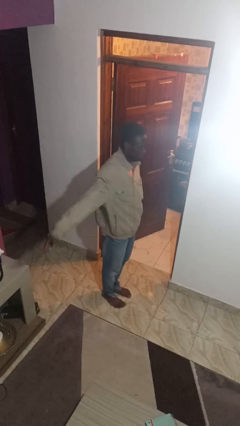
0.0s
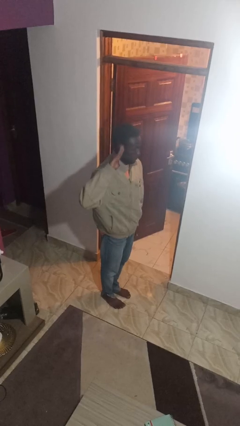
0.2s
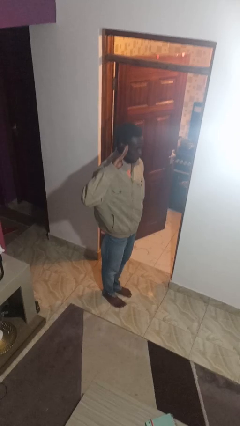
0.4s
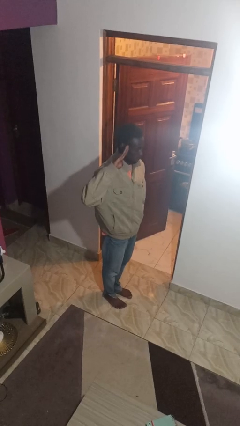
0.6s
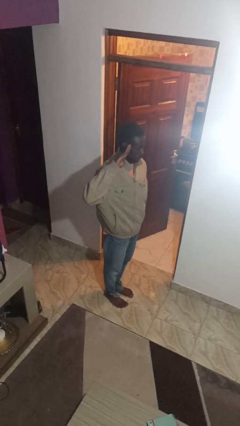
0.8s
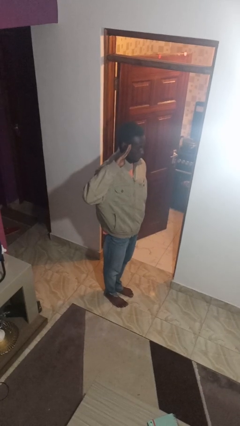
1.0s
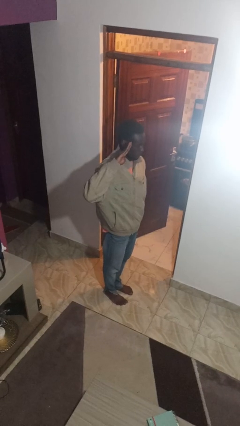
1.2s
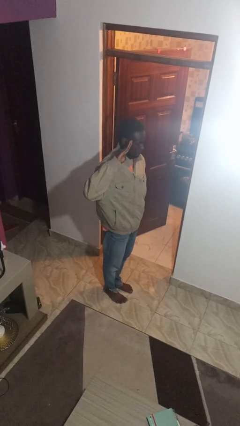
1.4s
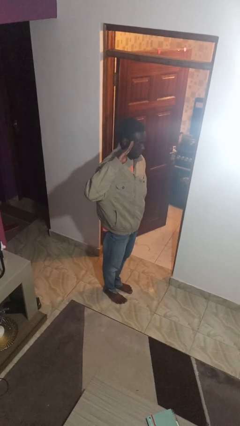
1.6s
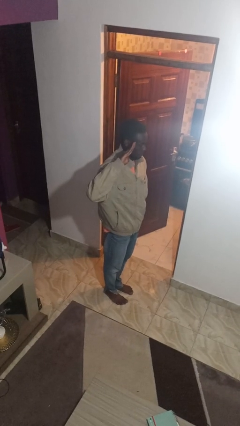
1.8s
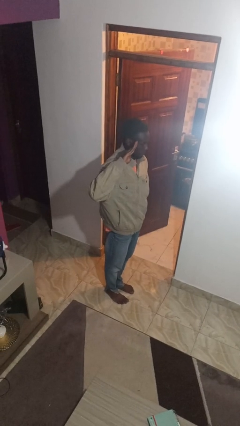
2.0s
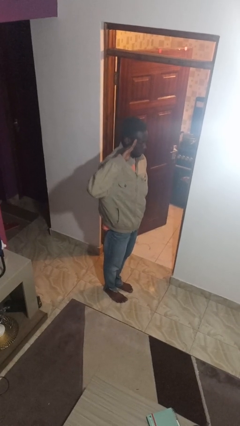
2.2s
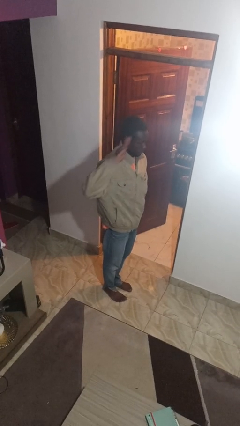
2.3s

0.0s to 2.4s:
person salutes

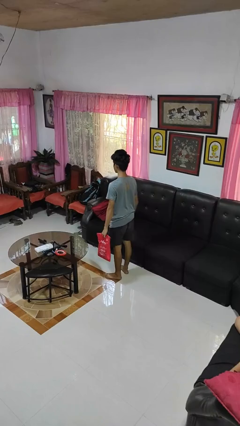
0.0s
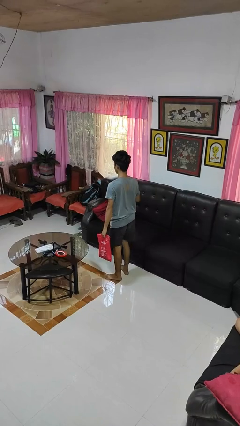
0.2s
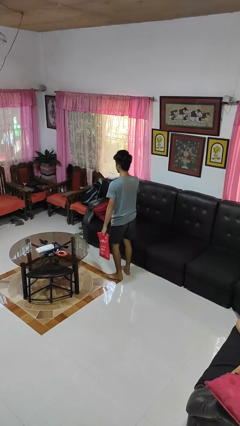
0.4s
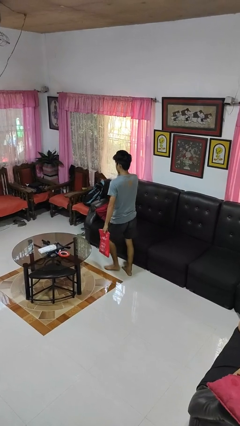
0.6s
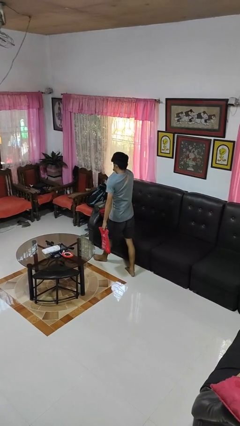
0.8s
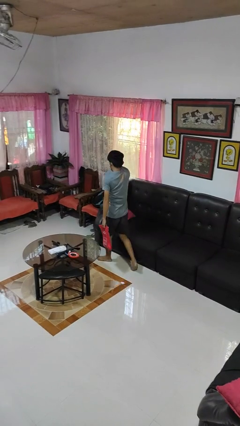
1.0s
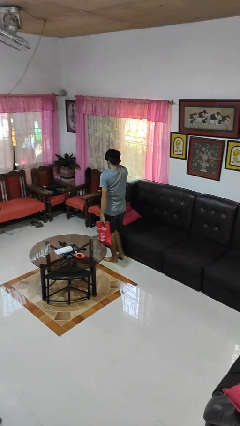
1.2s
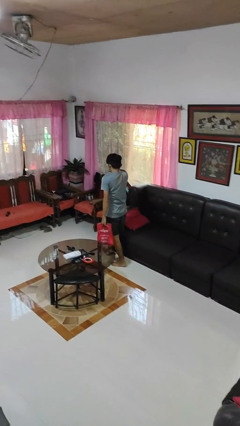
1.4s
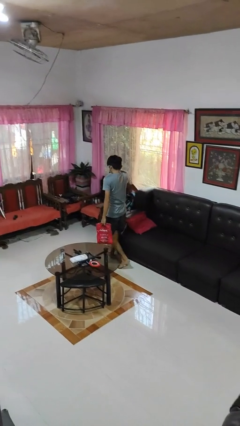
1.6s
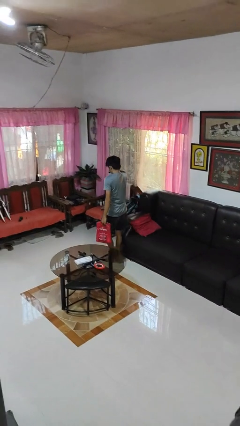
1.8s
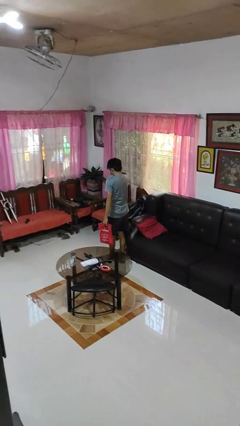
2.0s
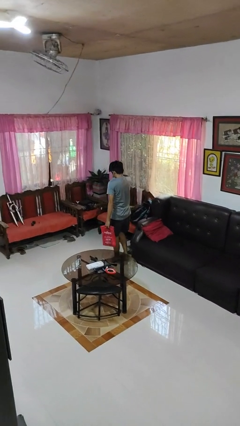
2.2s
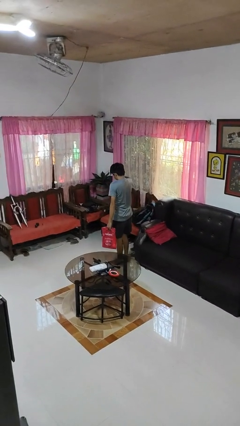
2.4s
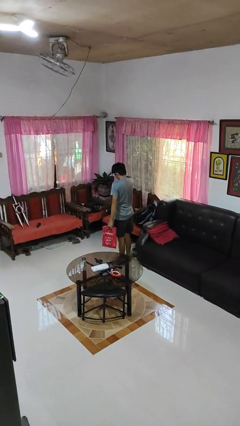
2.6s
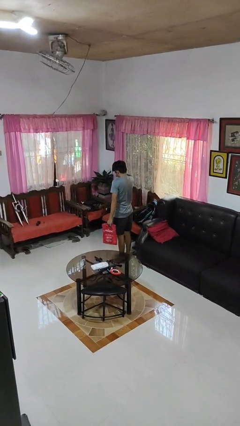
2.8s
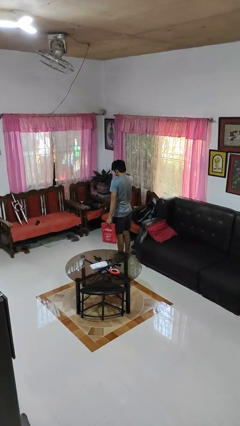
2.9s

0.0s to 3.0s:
person carries groceries

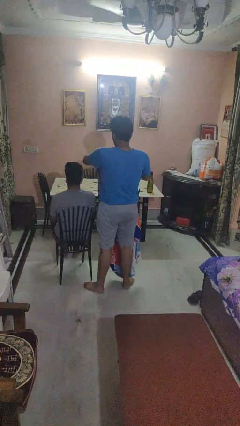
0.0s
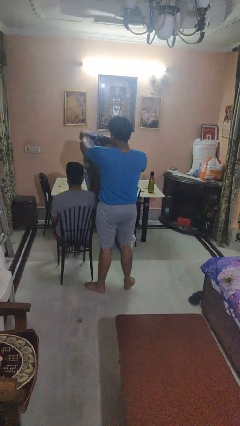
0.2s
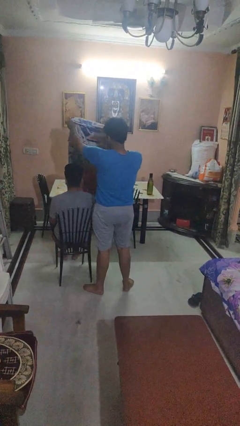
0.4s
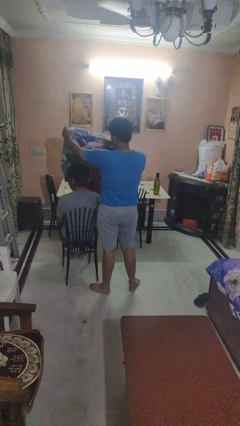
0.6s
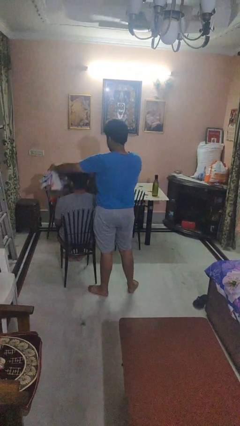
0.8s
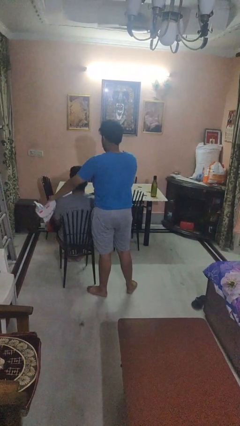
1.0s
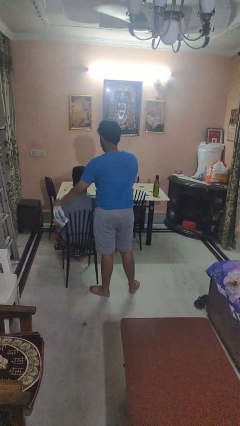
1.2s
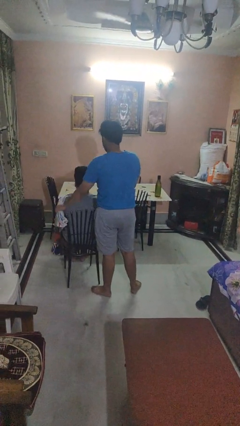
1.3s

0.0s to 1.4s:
person covers friend with blanket

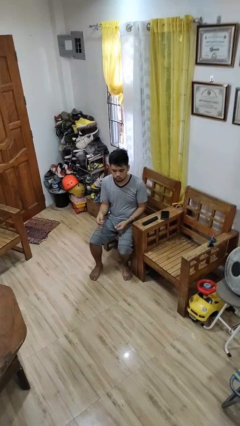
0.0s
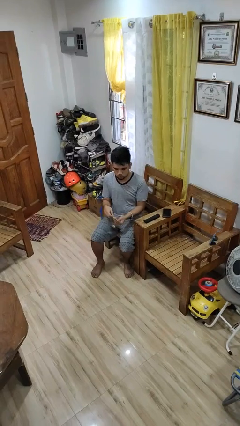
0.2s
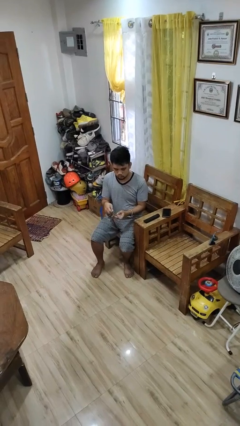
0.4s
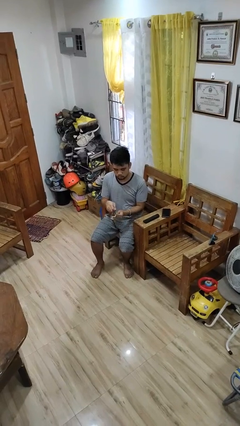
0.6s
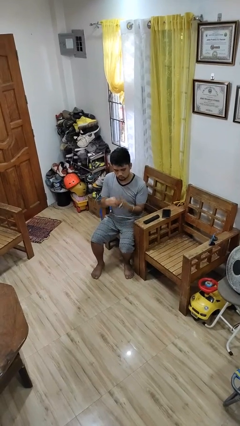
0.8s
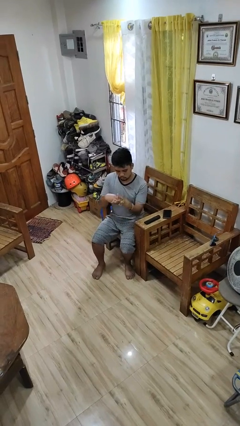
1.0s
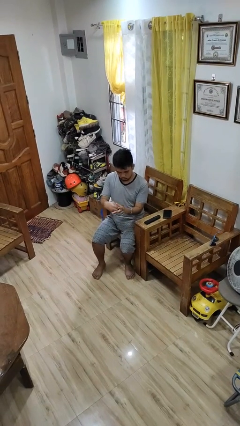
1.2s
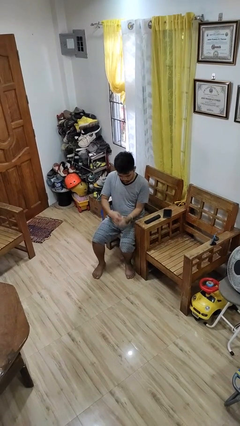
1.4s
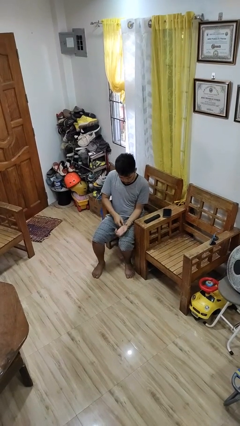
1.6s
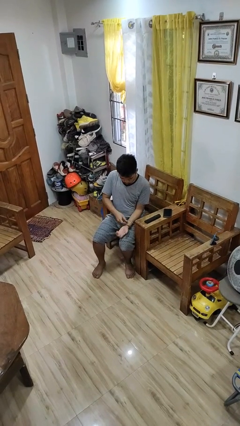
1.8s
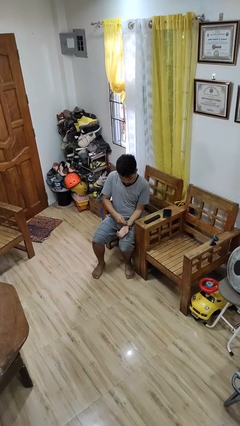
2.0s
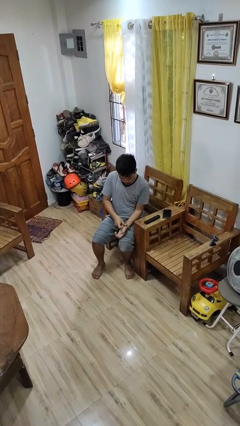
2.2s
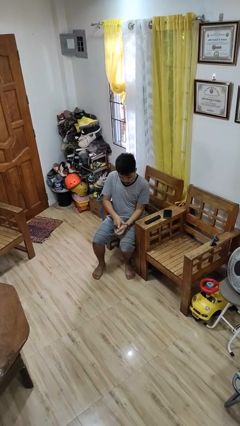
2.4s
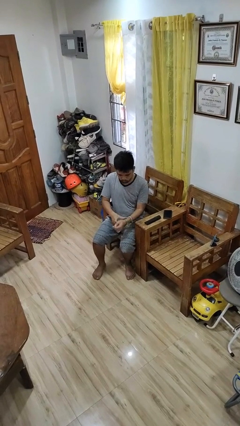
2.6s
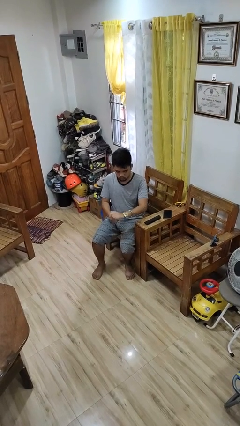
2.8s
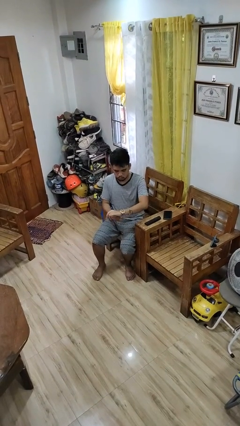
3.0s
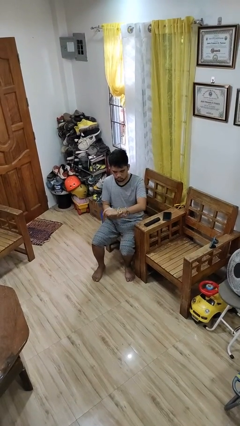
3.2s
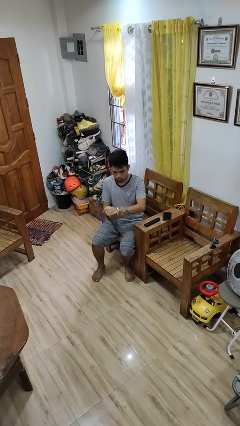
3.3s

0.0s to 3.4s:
person puts on wristwatch

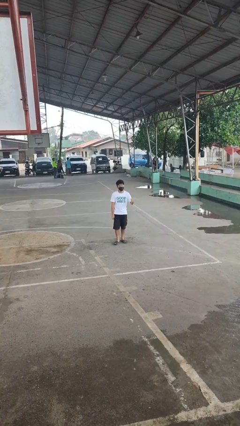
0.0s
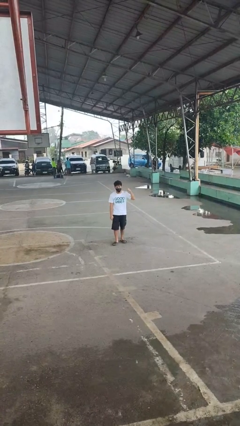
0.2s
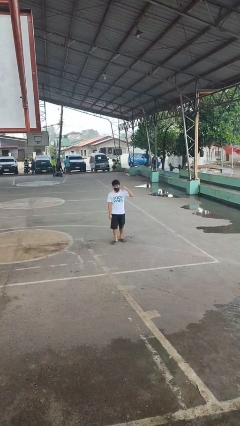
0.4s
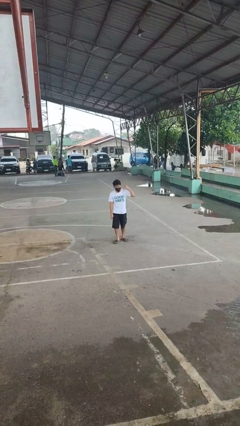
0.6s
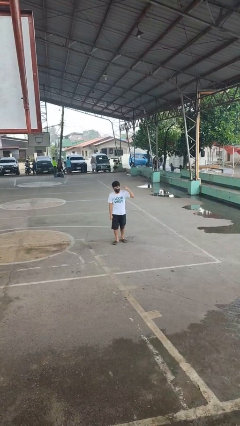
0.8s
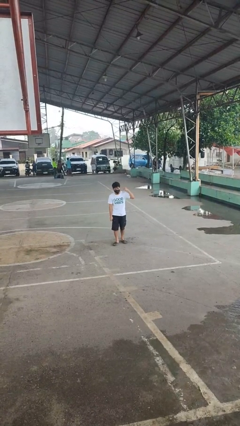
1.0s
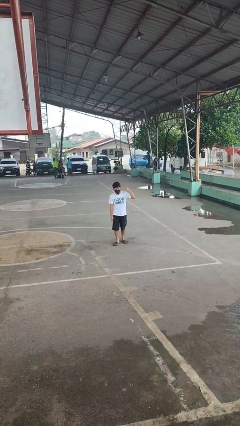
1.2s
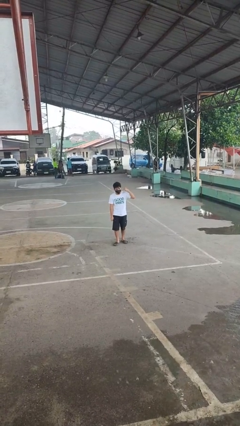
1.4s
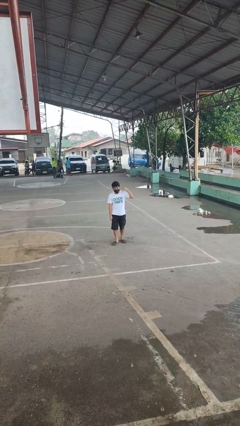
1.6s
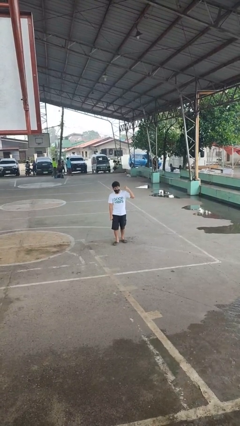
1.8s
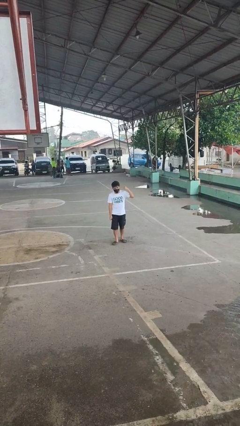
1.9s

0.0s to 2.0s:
person gestures listen closely

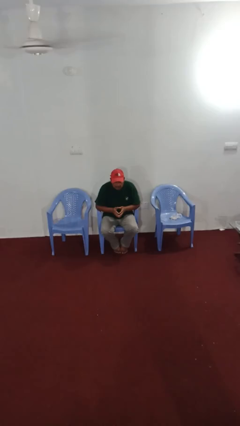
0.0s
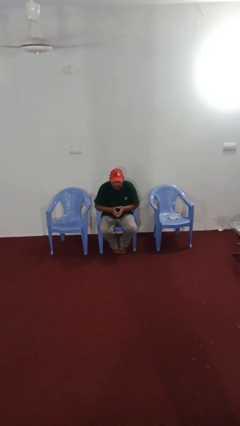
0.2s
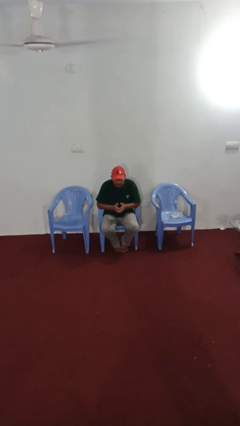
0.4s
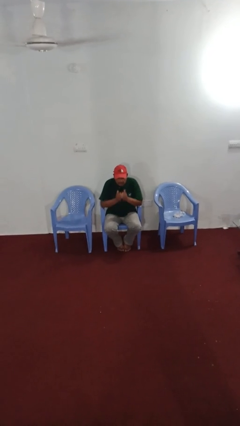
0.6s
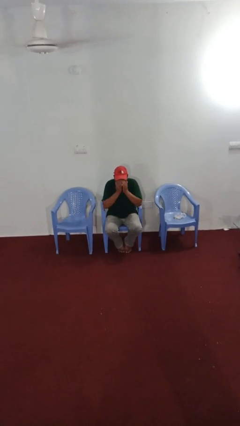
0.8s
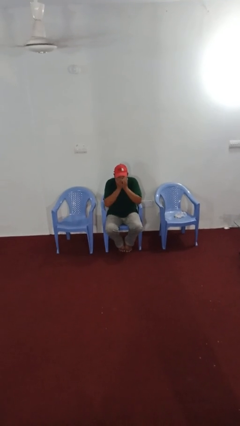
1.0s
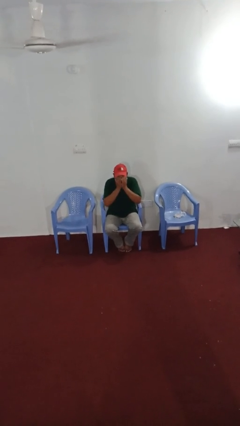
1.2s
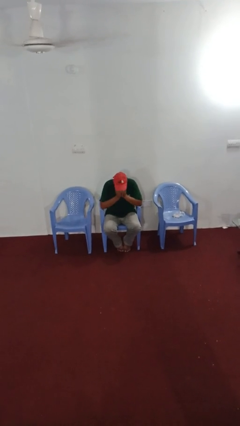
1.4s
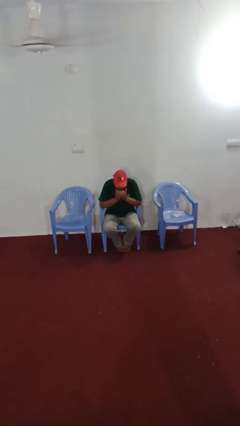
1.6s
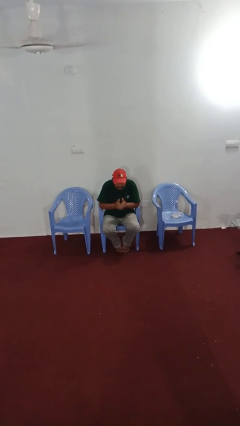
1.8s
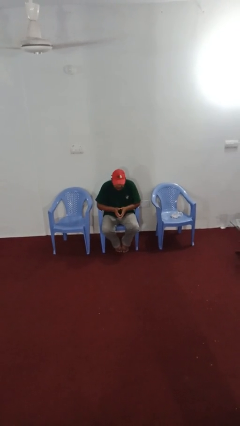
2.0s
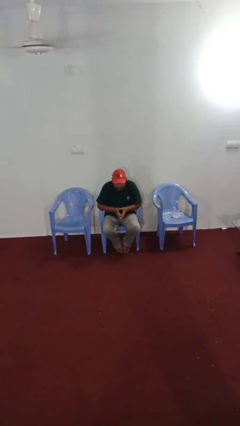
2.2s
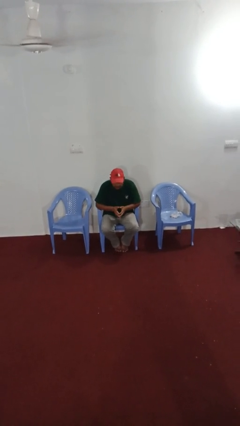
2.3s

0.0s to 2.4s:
person sneezes into hand

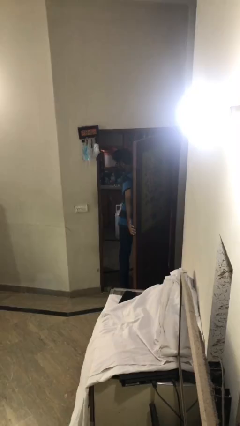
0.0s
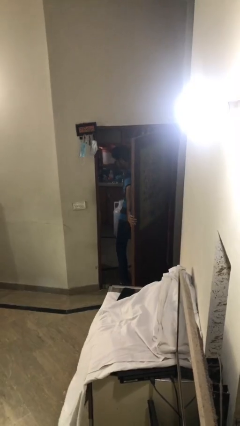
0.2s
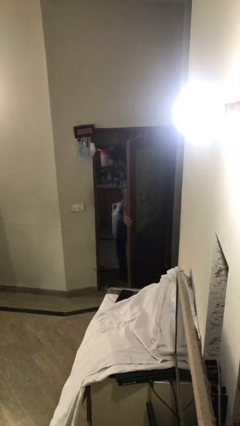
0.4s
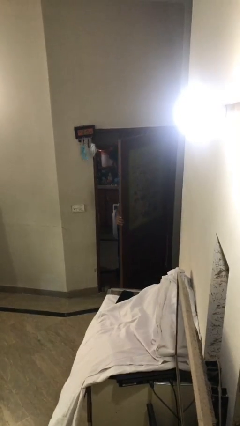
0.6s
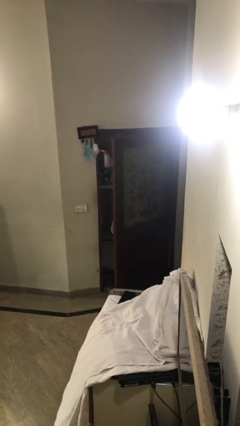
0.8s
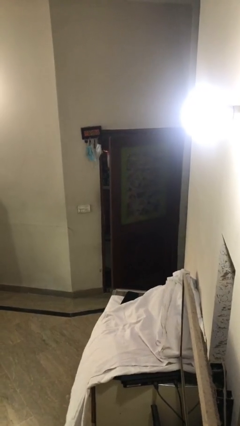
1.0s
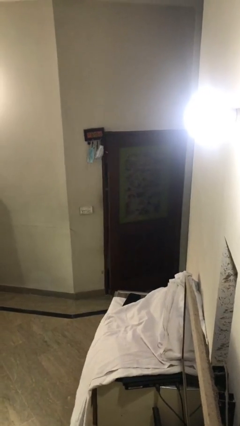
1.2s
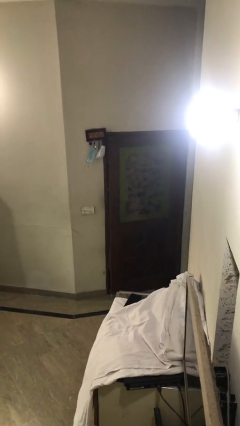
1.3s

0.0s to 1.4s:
person closes facility door

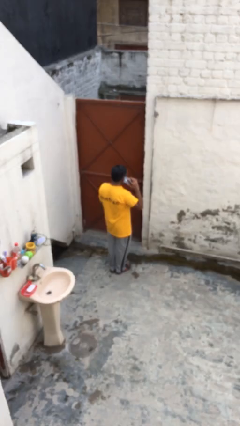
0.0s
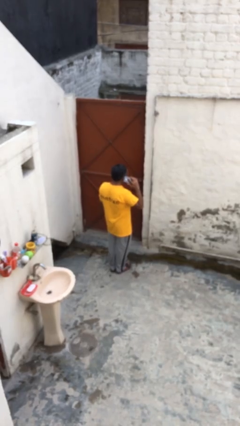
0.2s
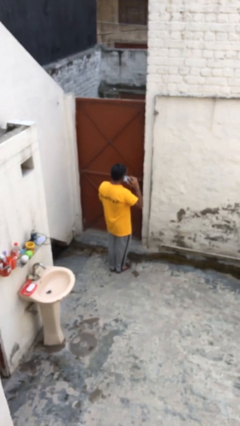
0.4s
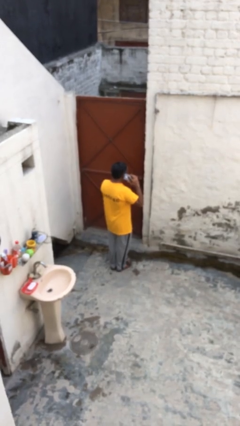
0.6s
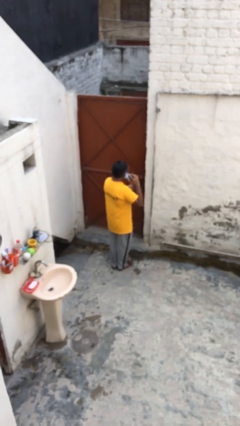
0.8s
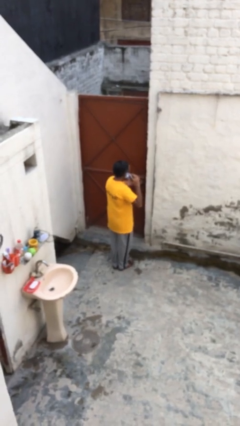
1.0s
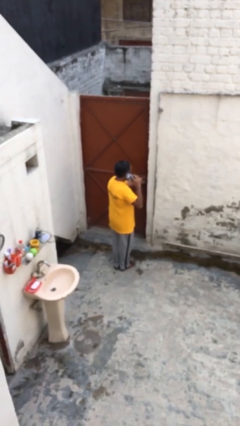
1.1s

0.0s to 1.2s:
person opens facility door
